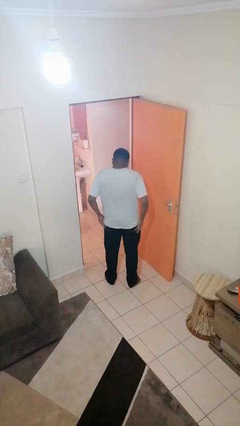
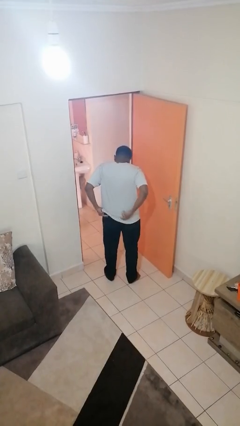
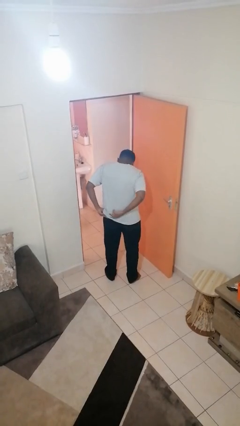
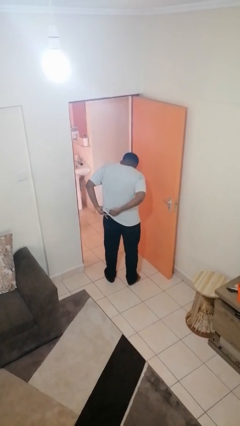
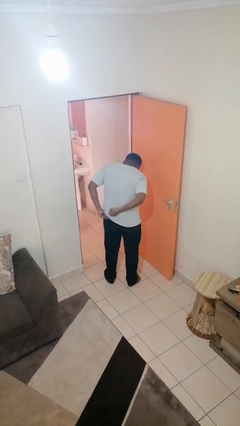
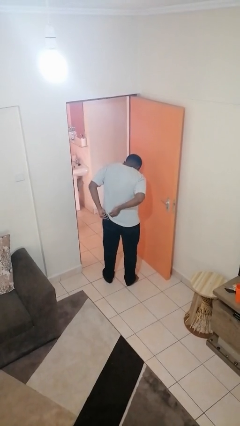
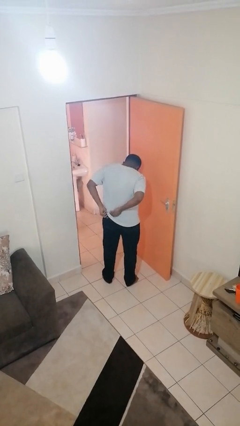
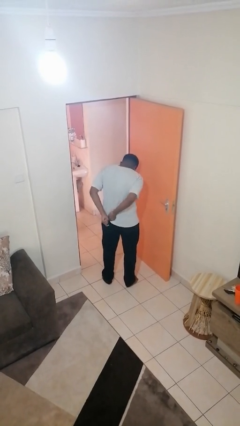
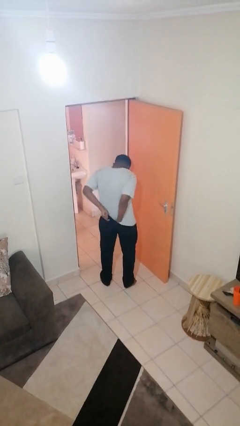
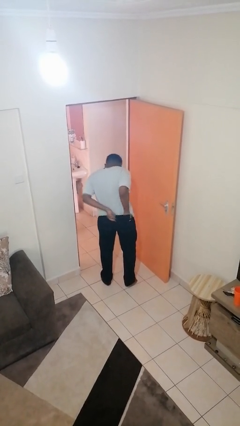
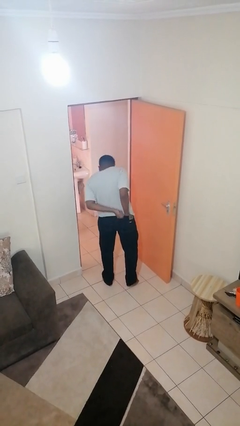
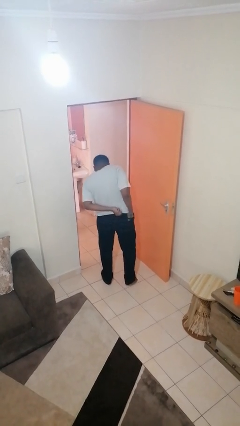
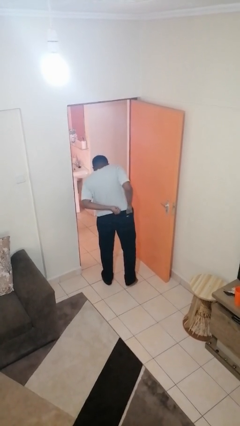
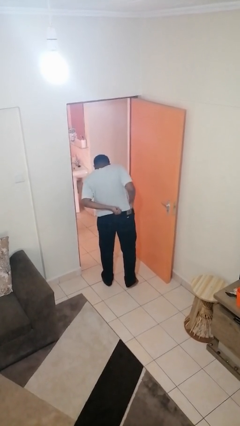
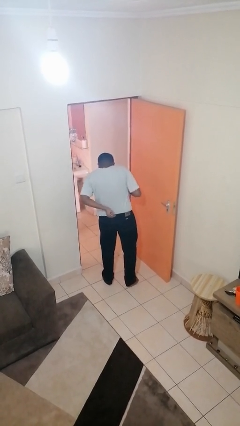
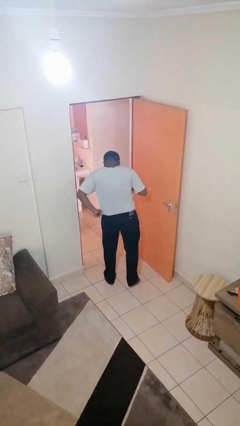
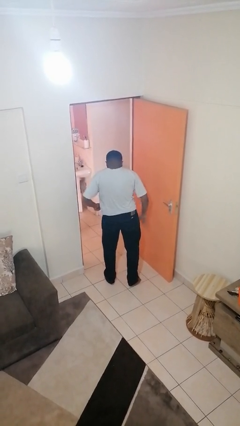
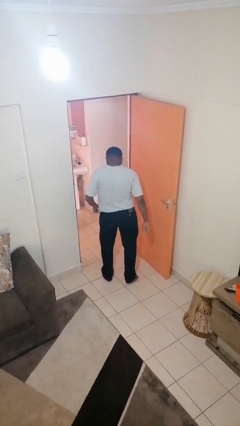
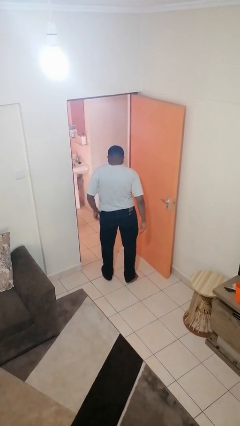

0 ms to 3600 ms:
person tucks in shirt

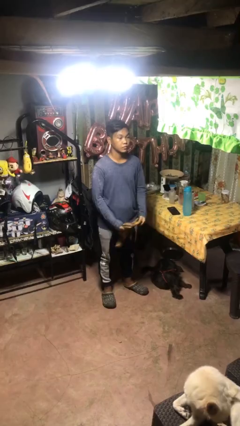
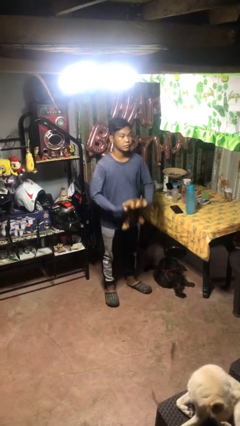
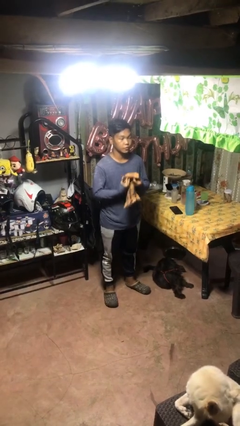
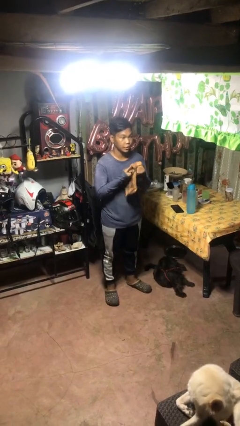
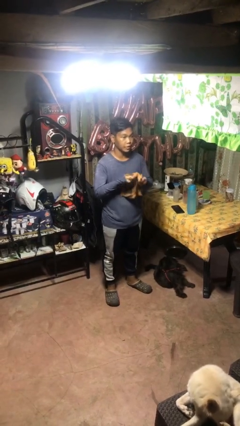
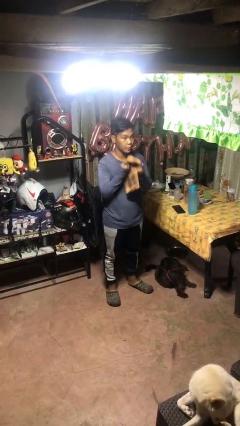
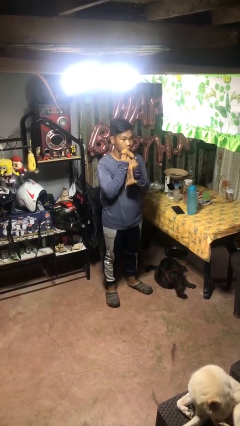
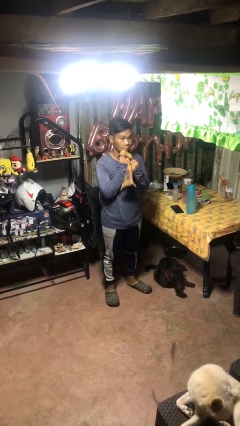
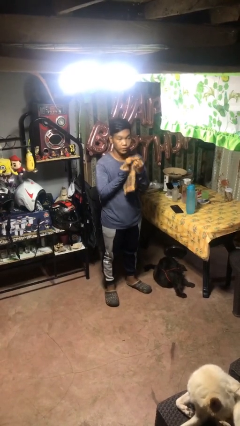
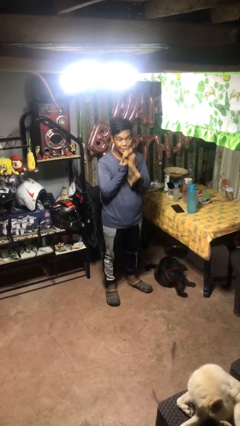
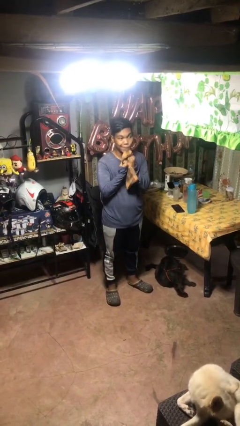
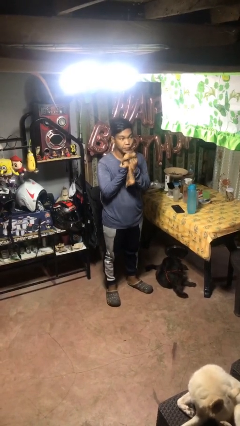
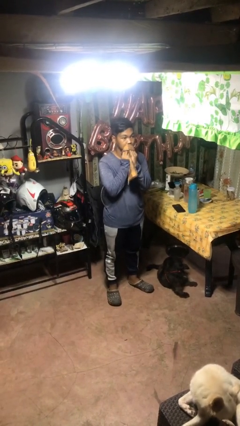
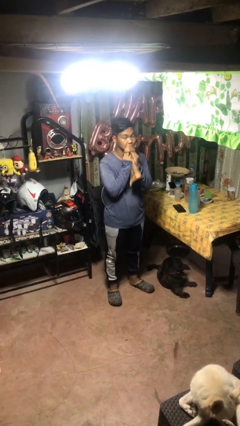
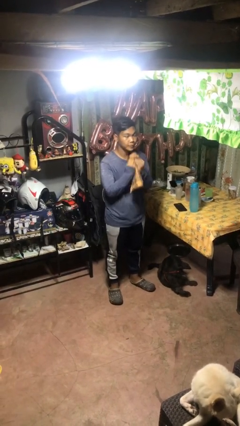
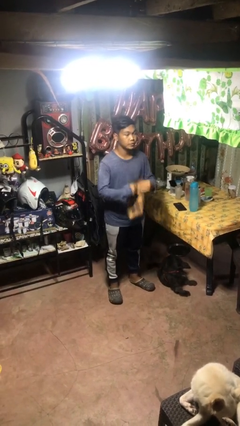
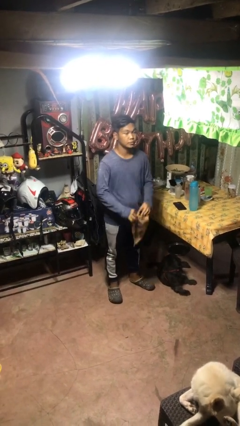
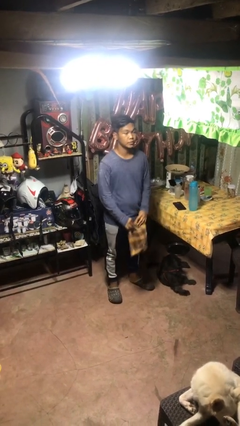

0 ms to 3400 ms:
person wipes mouth with napkin

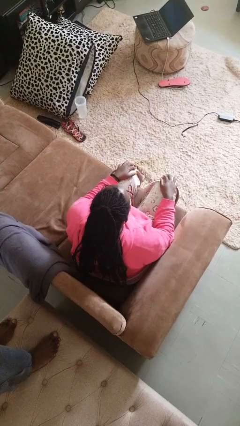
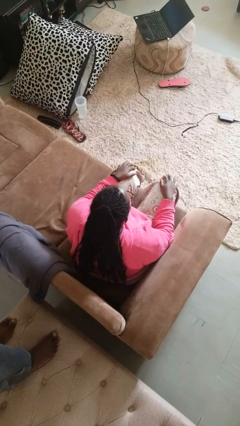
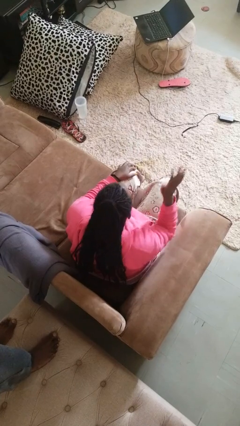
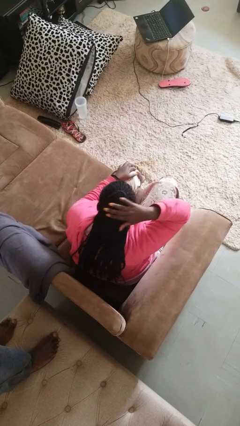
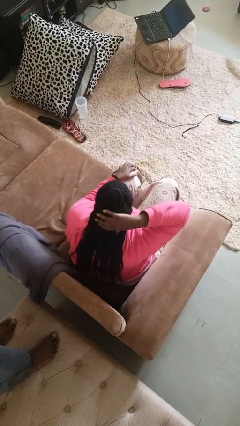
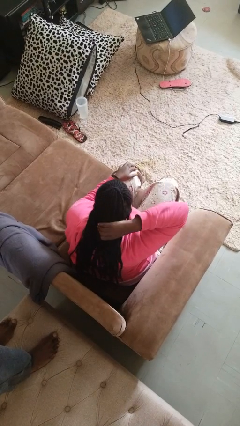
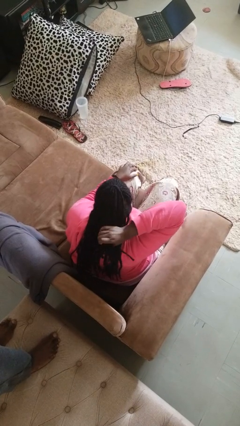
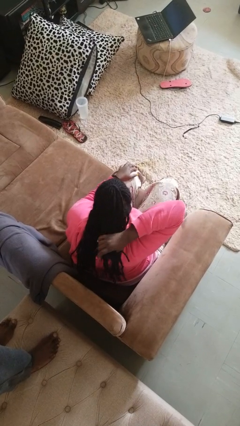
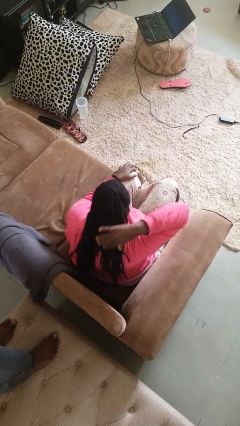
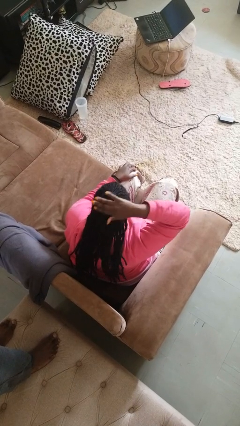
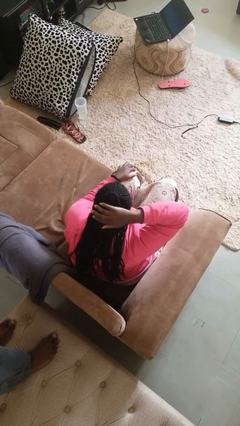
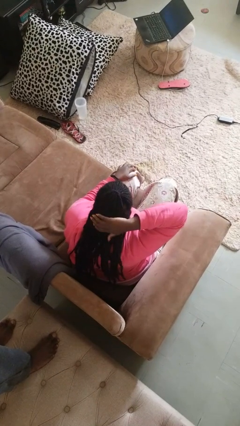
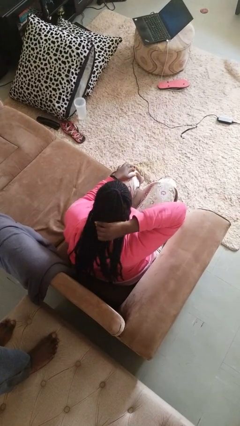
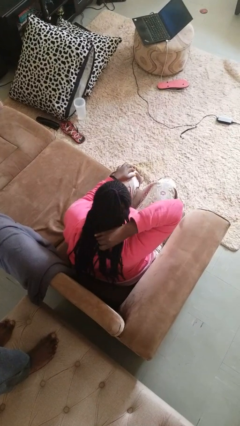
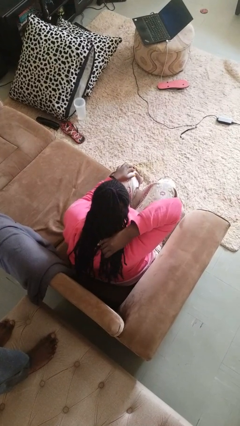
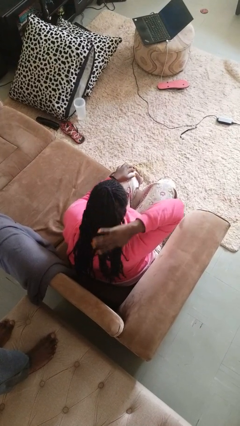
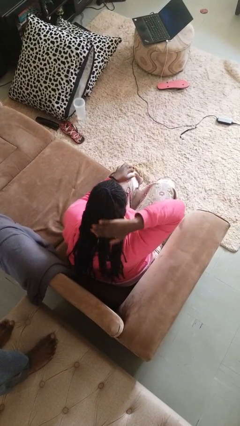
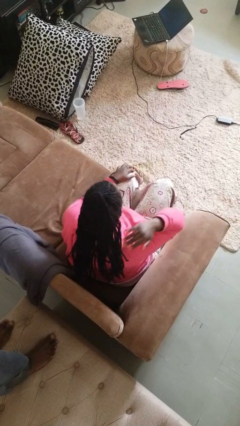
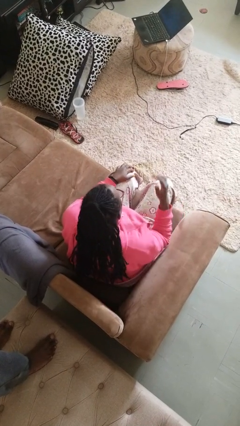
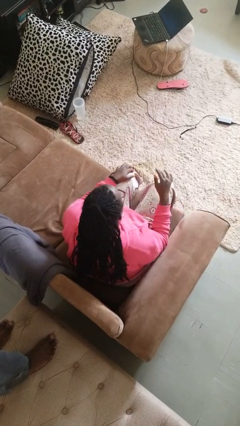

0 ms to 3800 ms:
person strokes hair

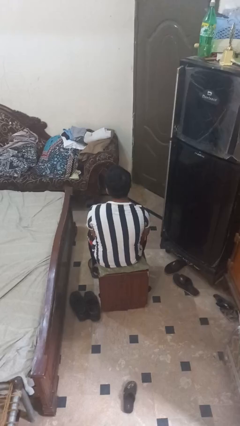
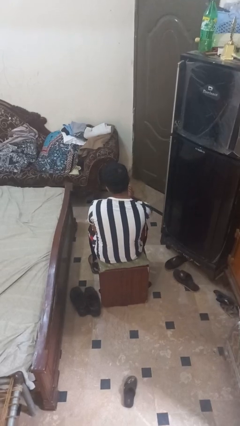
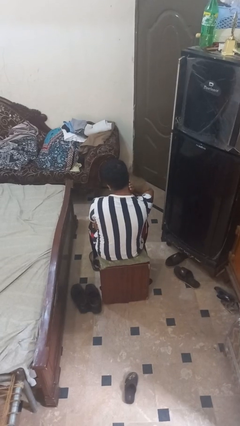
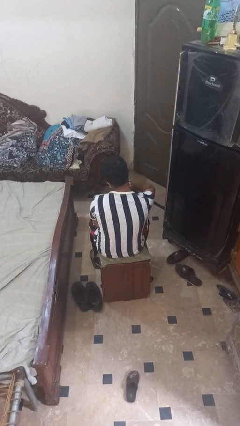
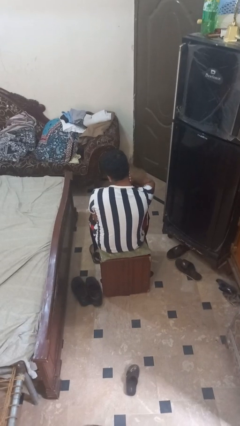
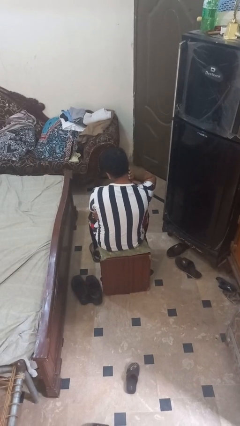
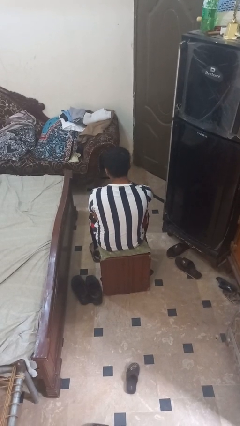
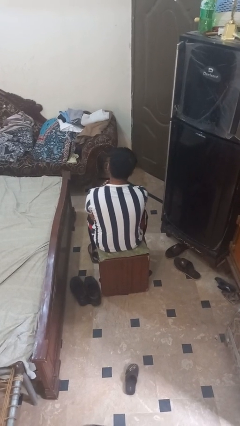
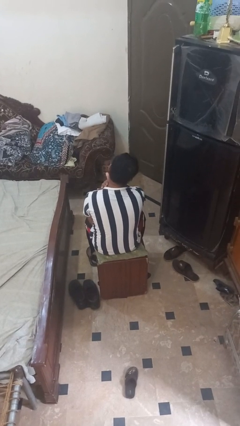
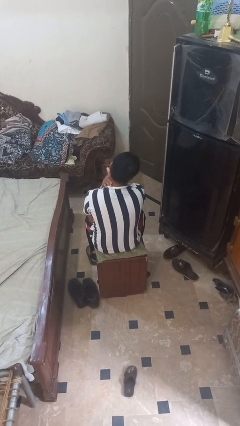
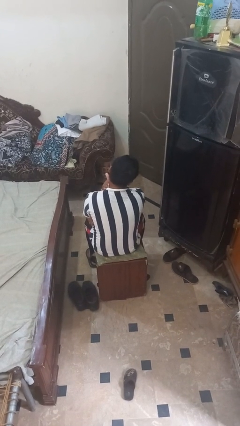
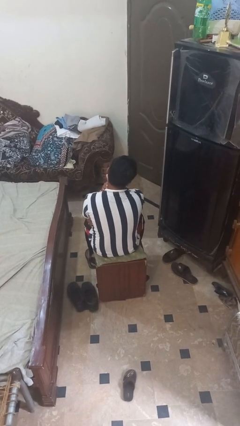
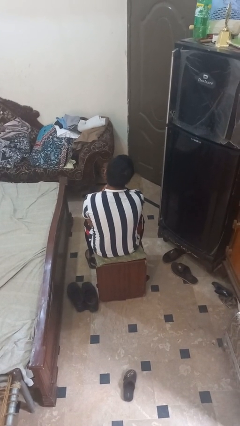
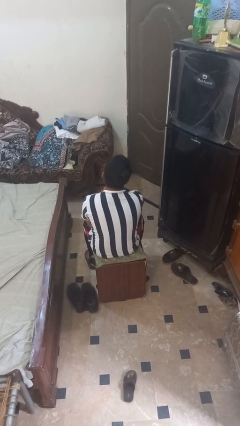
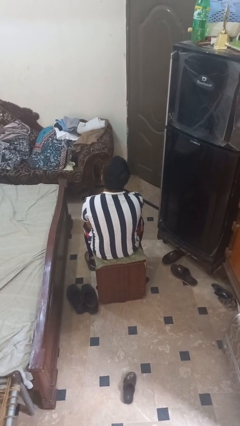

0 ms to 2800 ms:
person rubs neck

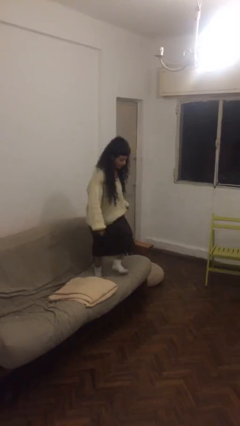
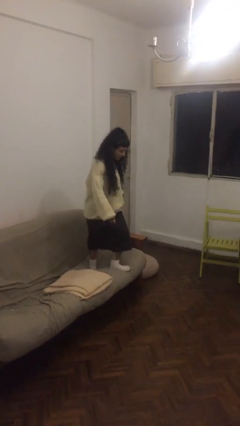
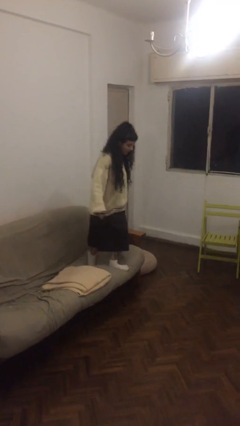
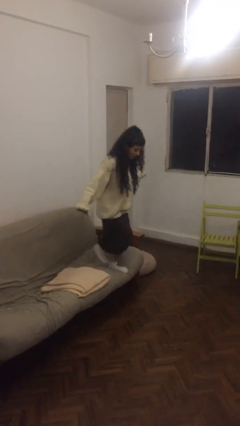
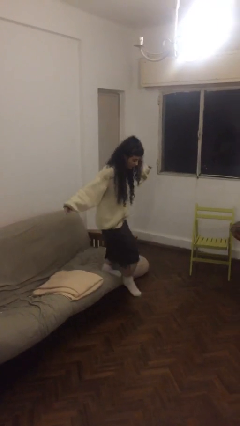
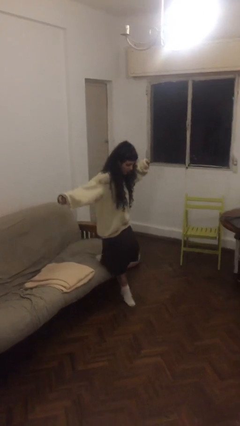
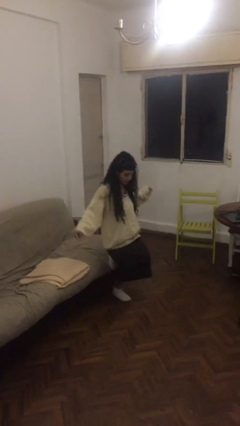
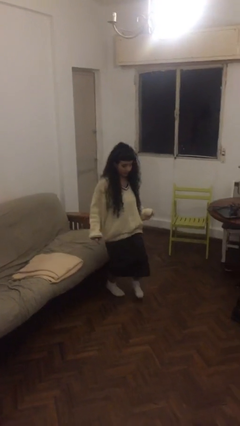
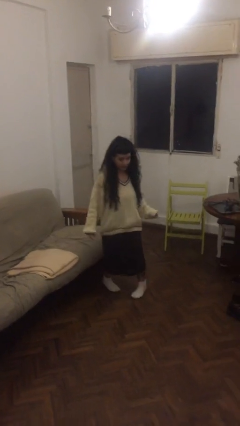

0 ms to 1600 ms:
person climbs off couch

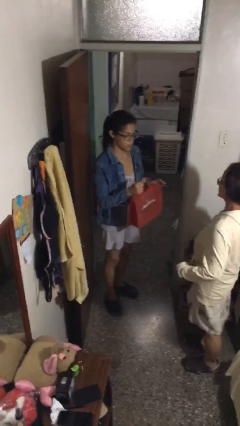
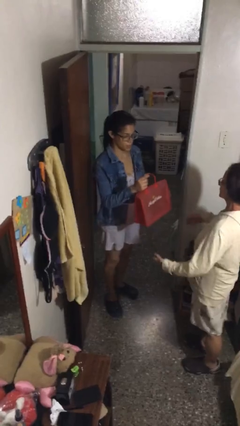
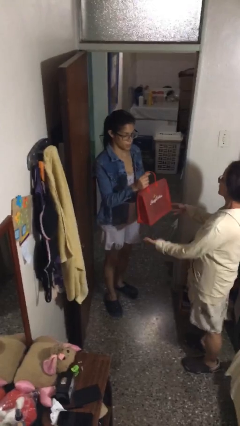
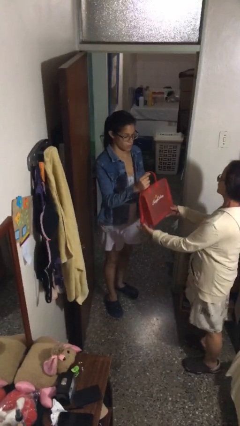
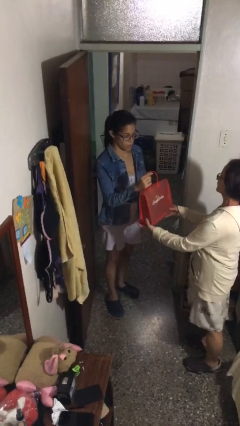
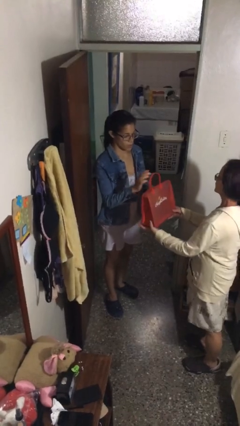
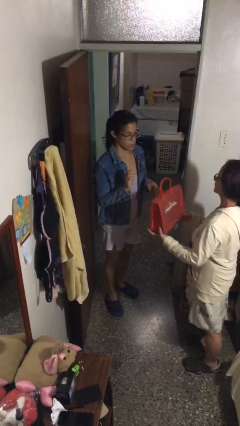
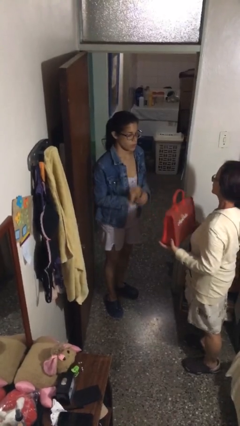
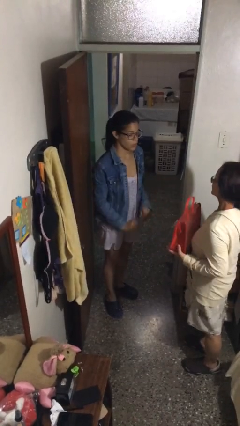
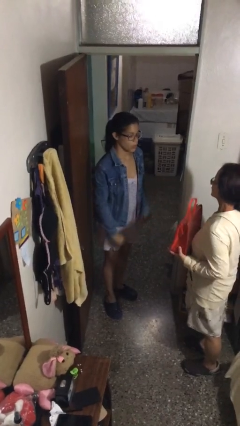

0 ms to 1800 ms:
person transfers object to person

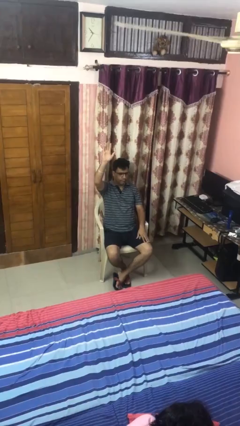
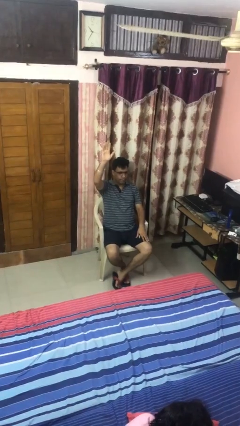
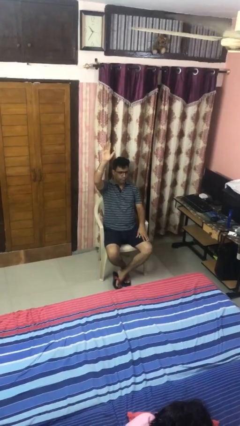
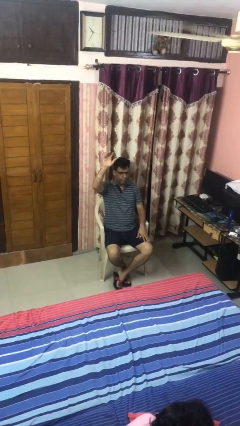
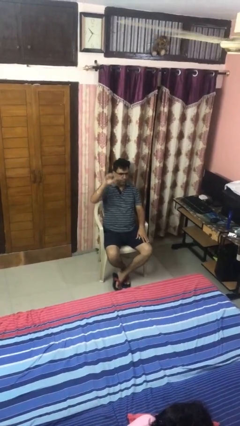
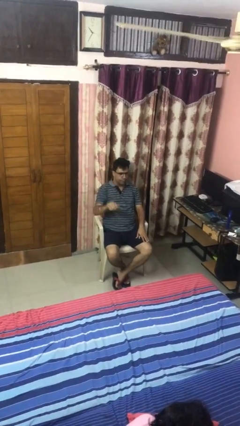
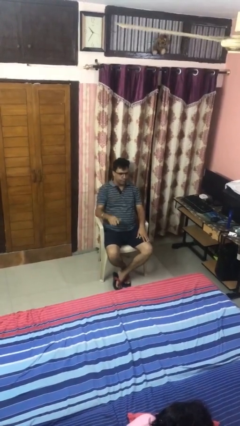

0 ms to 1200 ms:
person gestures lower hand
